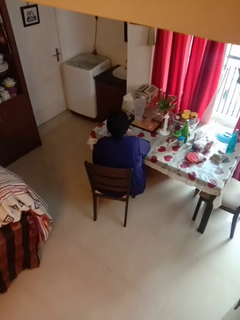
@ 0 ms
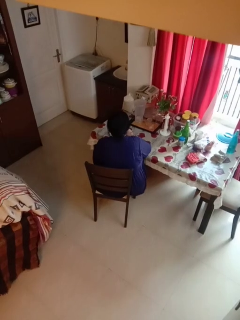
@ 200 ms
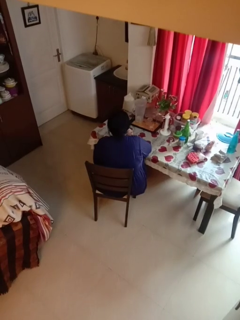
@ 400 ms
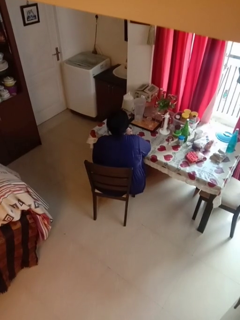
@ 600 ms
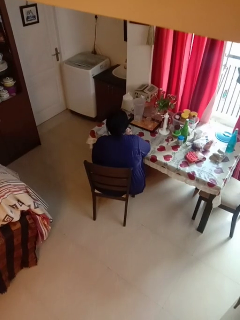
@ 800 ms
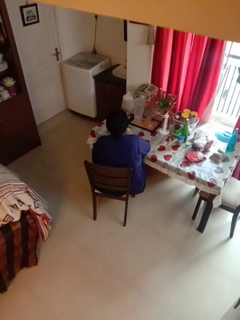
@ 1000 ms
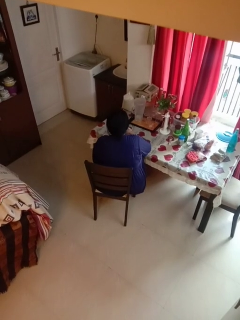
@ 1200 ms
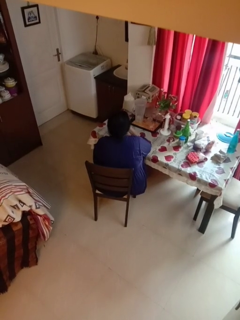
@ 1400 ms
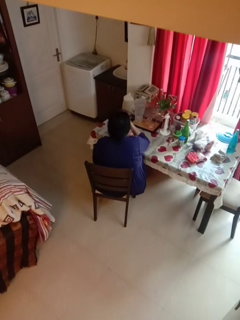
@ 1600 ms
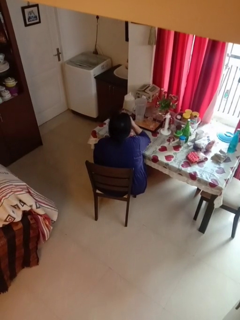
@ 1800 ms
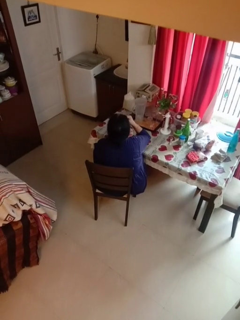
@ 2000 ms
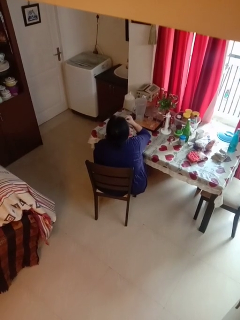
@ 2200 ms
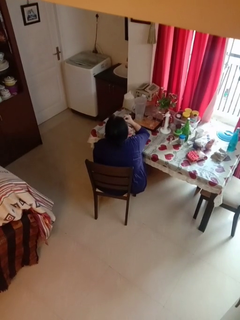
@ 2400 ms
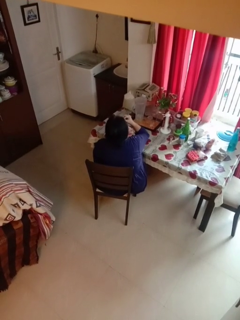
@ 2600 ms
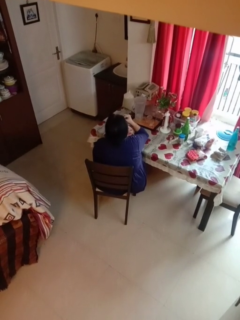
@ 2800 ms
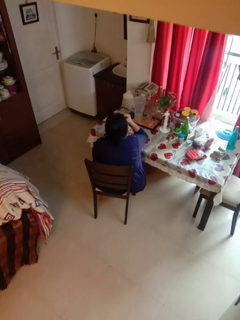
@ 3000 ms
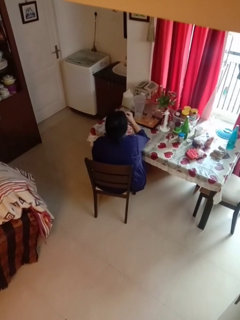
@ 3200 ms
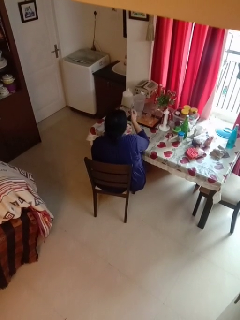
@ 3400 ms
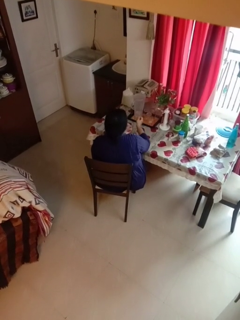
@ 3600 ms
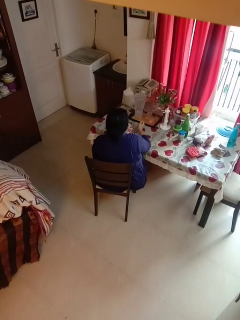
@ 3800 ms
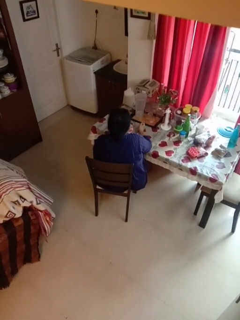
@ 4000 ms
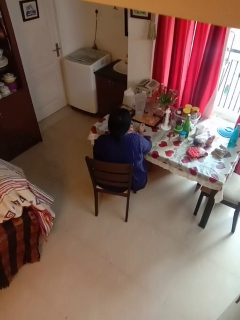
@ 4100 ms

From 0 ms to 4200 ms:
person eats with hands

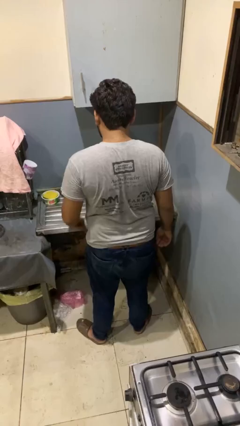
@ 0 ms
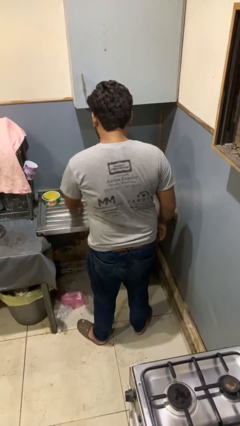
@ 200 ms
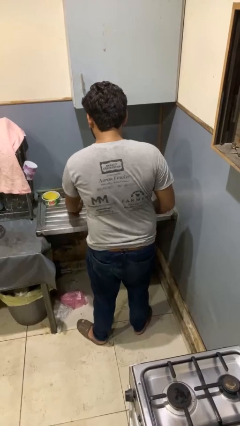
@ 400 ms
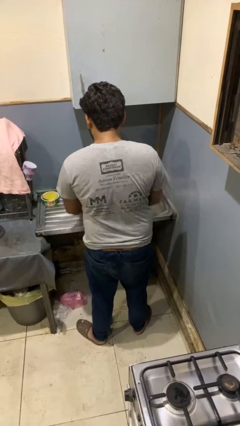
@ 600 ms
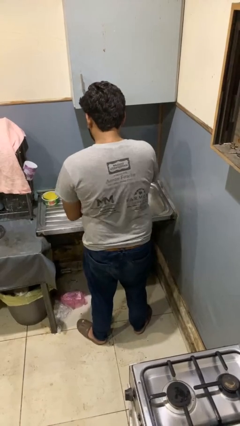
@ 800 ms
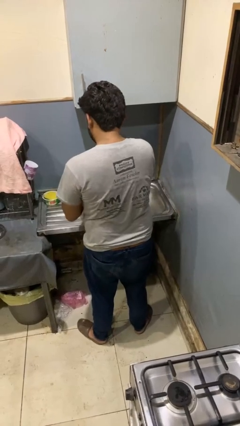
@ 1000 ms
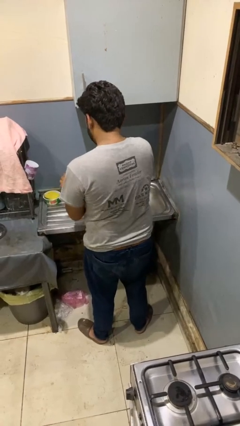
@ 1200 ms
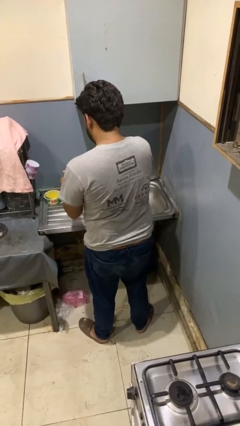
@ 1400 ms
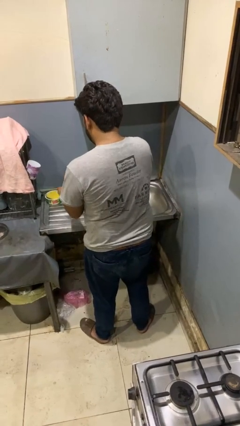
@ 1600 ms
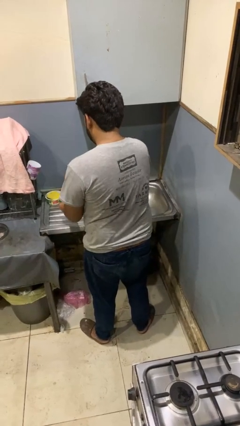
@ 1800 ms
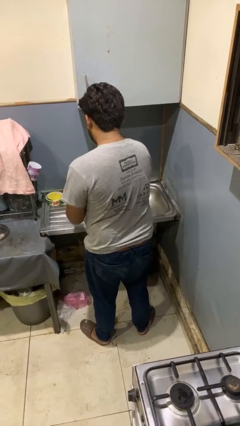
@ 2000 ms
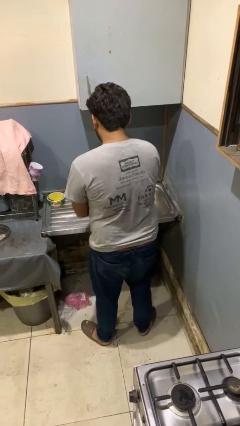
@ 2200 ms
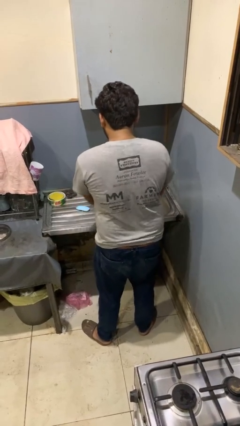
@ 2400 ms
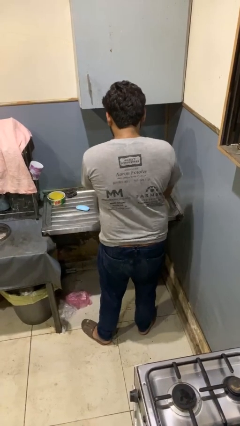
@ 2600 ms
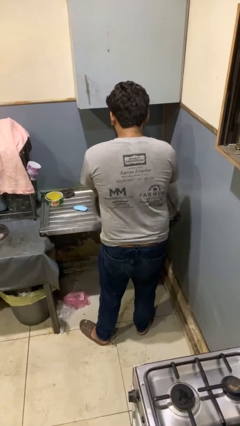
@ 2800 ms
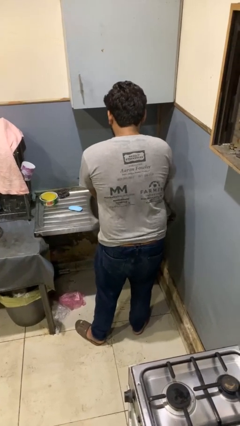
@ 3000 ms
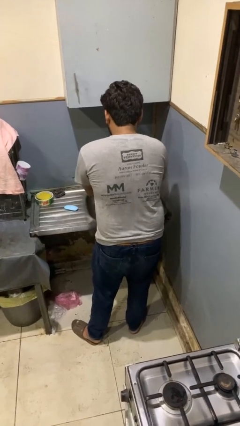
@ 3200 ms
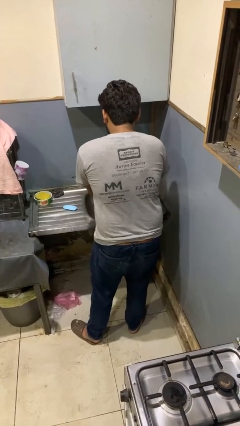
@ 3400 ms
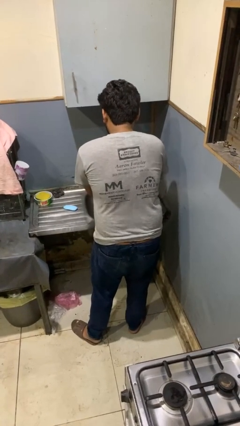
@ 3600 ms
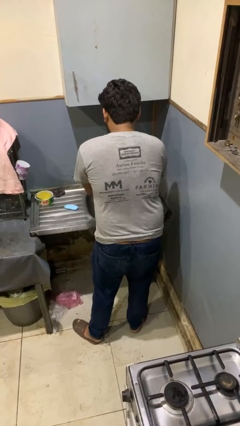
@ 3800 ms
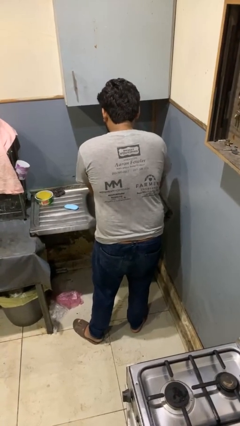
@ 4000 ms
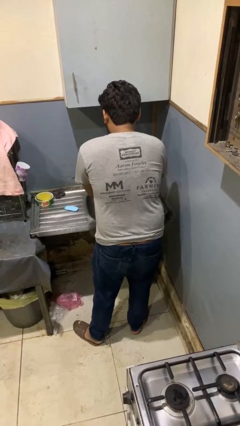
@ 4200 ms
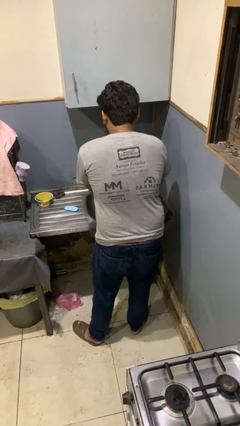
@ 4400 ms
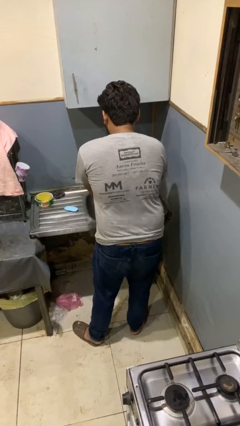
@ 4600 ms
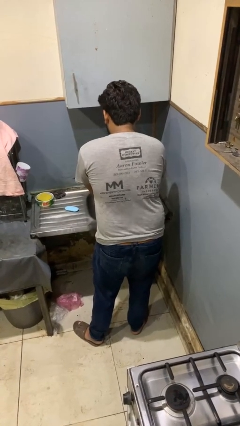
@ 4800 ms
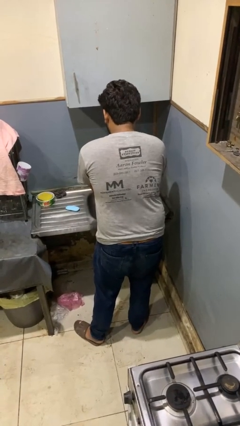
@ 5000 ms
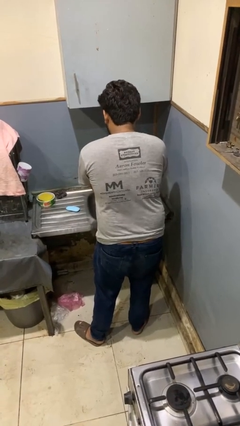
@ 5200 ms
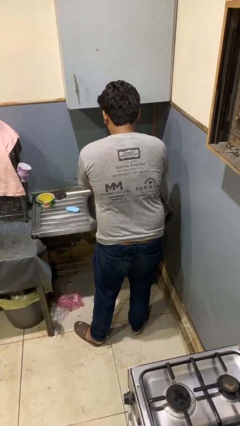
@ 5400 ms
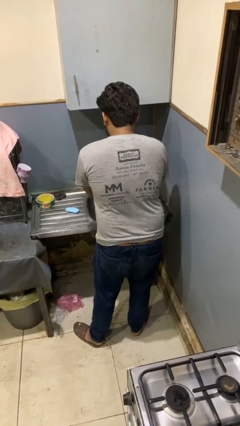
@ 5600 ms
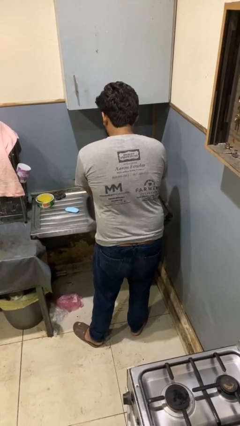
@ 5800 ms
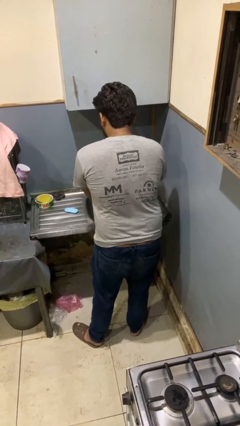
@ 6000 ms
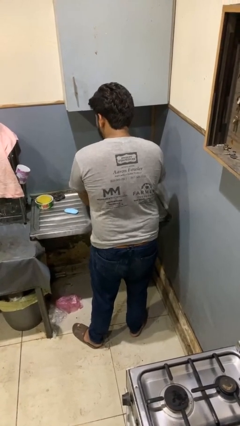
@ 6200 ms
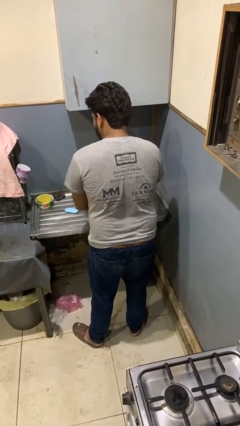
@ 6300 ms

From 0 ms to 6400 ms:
person washes hands

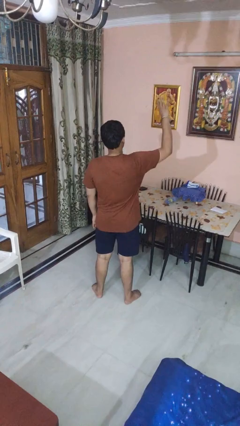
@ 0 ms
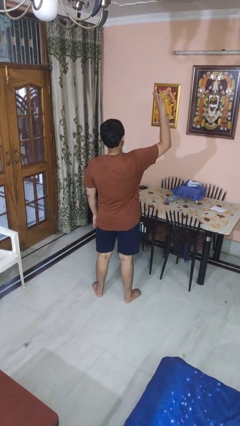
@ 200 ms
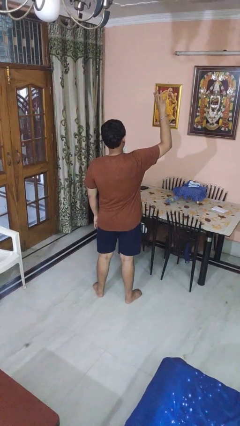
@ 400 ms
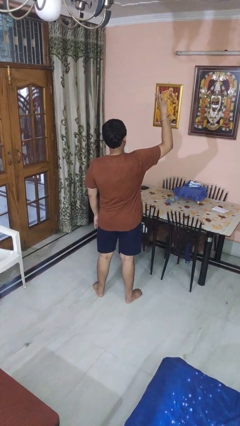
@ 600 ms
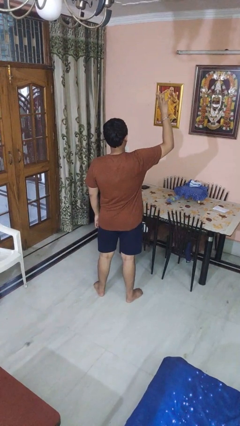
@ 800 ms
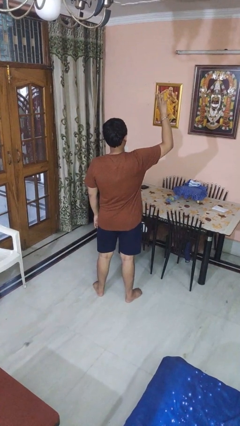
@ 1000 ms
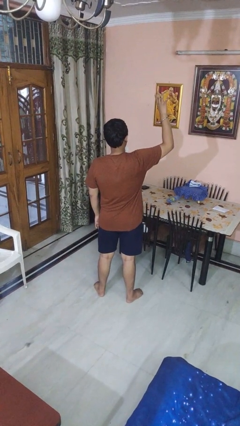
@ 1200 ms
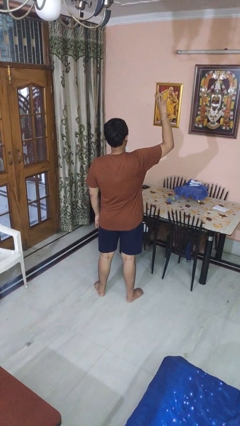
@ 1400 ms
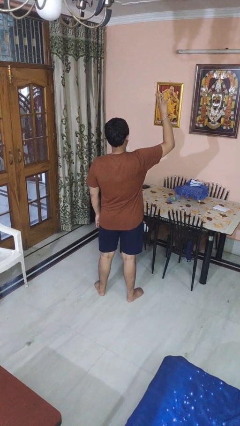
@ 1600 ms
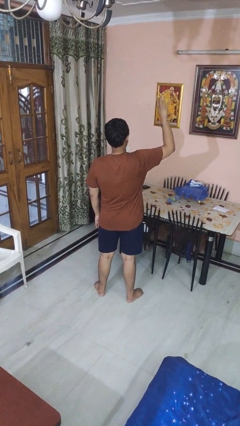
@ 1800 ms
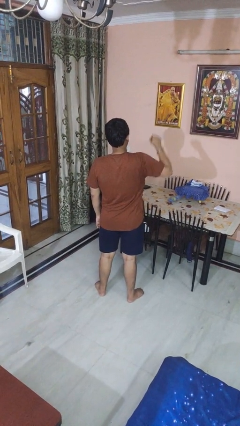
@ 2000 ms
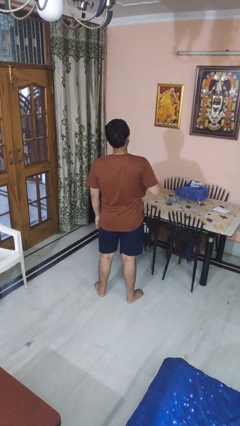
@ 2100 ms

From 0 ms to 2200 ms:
person gestures number four

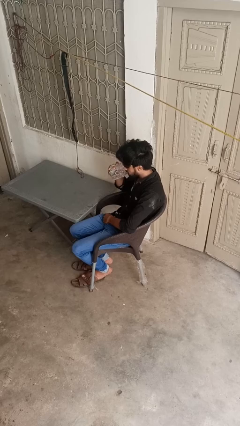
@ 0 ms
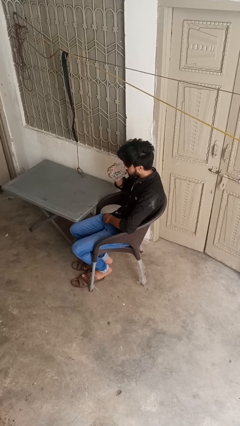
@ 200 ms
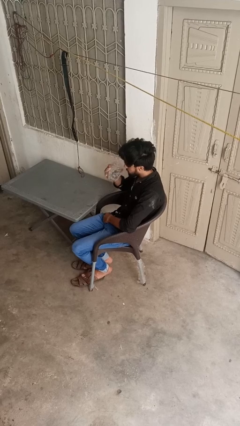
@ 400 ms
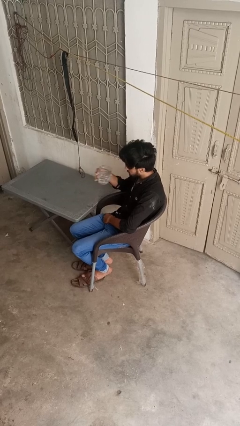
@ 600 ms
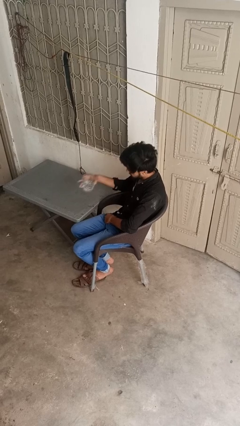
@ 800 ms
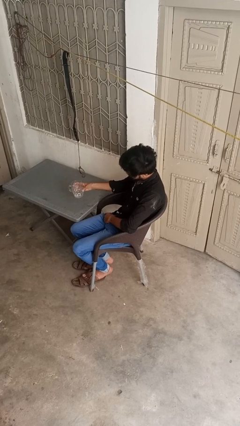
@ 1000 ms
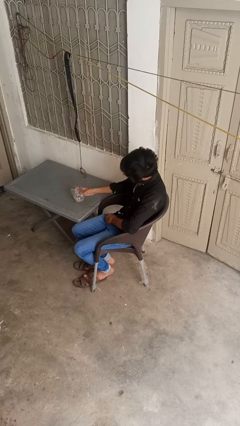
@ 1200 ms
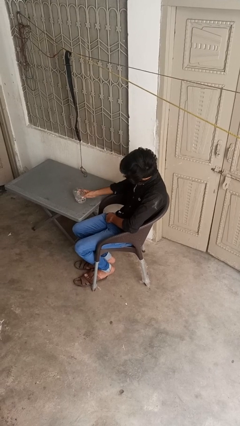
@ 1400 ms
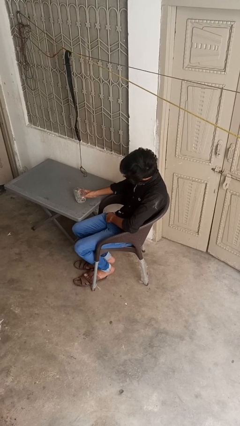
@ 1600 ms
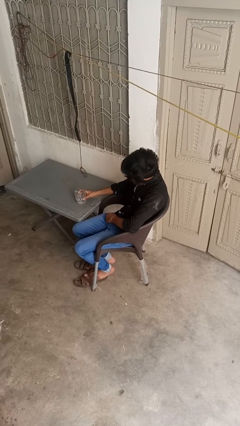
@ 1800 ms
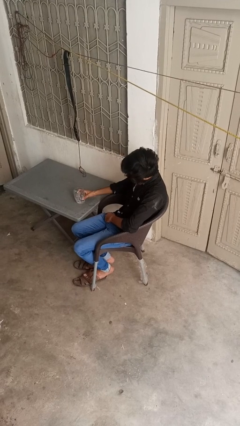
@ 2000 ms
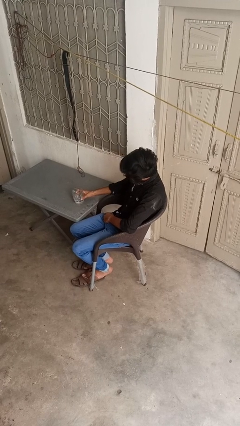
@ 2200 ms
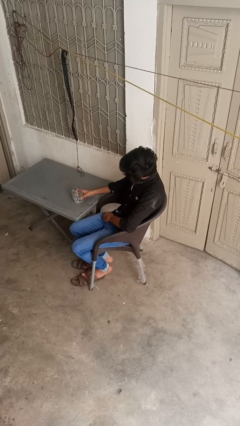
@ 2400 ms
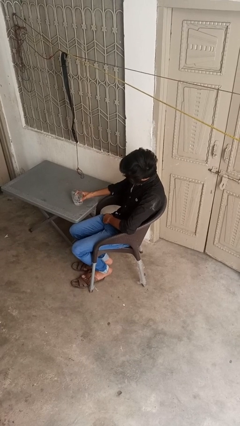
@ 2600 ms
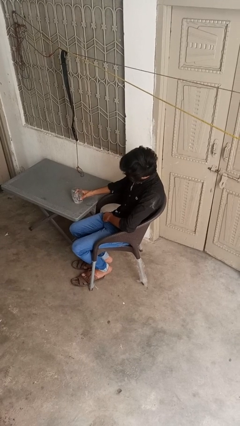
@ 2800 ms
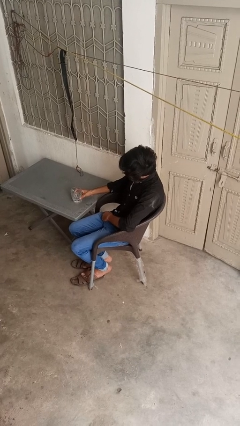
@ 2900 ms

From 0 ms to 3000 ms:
person puts down object on table

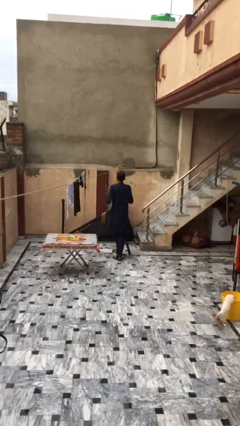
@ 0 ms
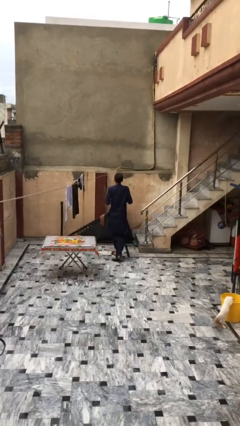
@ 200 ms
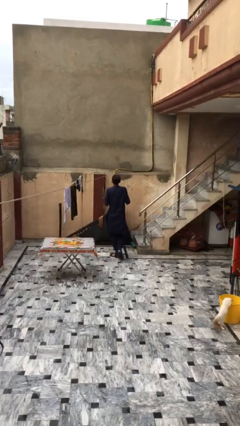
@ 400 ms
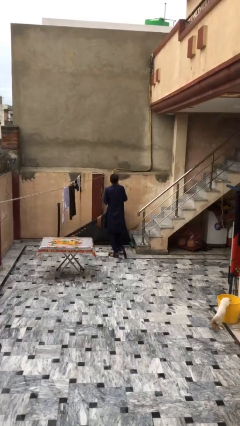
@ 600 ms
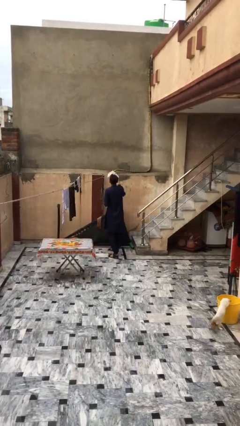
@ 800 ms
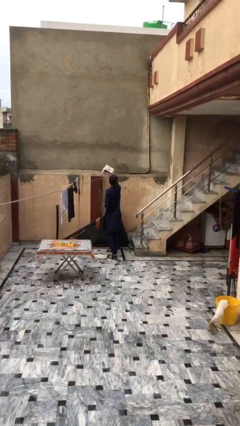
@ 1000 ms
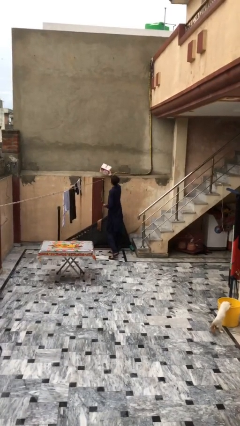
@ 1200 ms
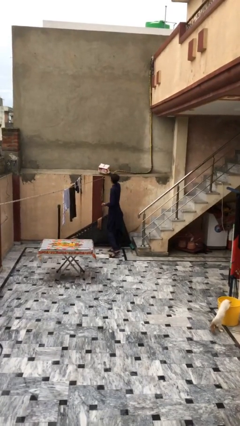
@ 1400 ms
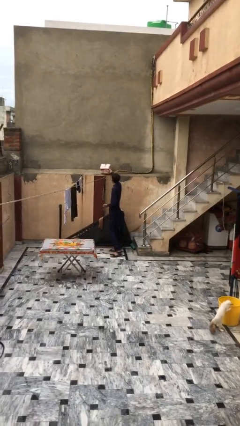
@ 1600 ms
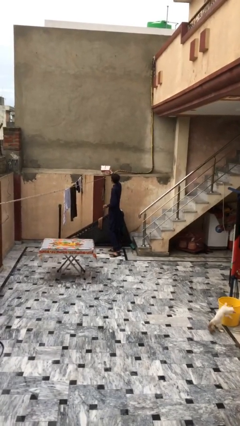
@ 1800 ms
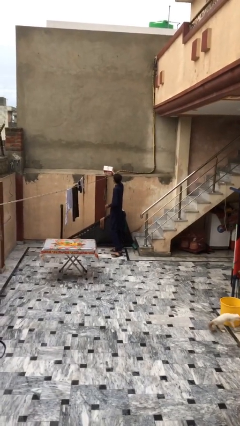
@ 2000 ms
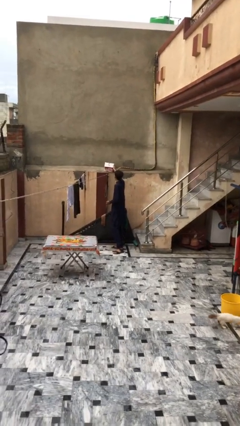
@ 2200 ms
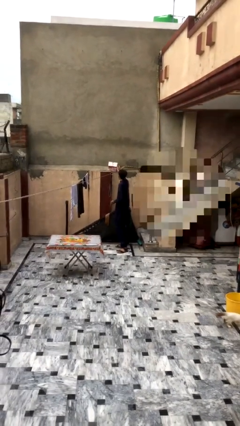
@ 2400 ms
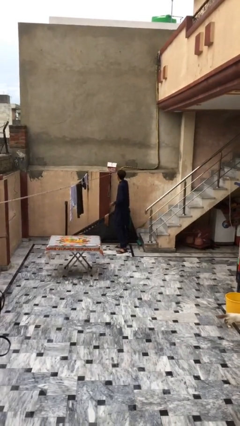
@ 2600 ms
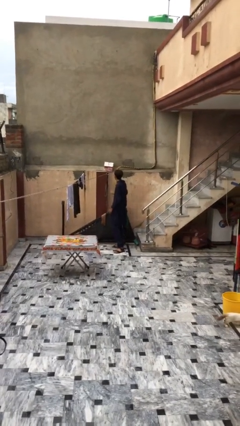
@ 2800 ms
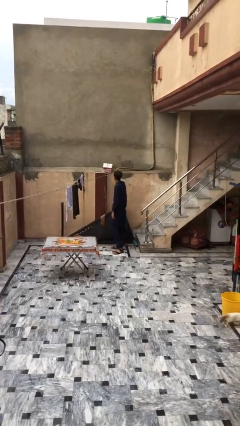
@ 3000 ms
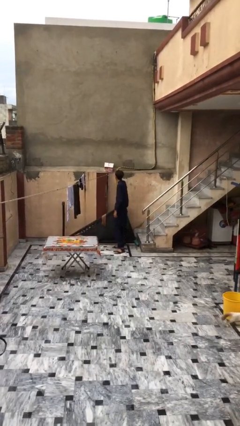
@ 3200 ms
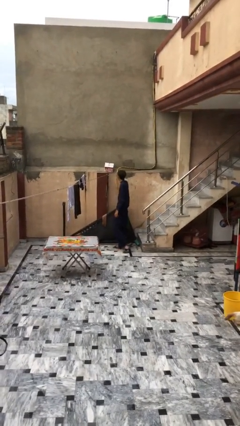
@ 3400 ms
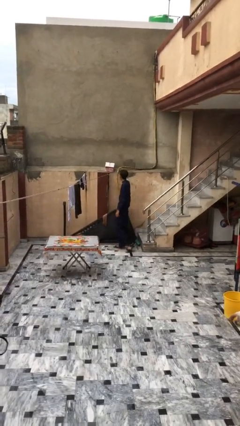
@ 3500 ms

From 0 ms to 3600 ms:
person puts down object on shelf
